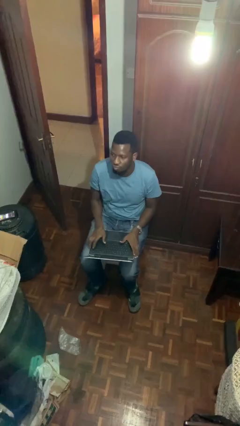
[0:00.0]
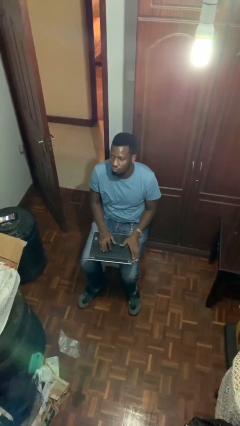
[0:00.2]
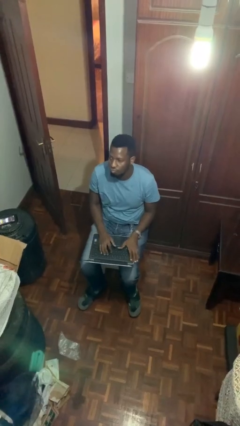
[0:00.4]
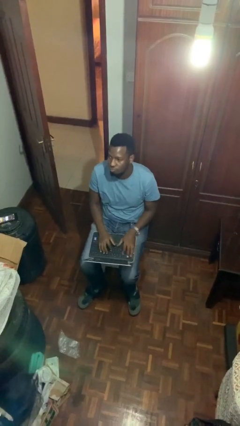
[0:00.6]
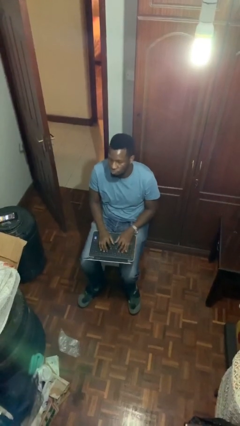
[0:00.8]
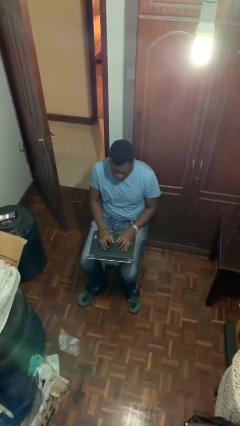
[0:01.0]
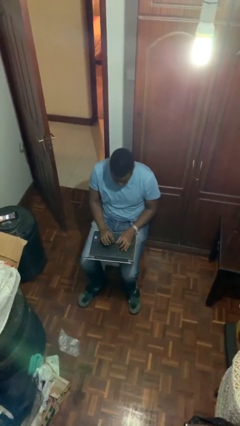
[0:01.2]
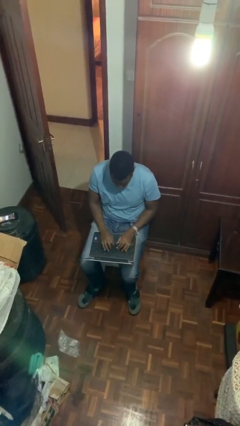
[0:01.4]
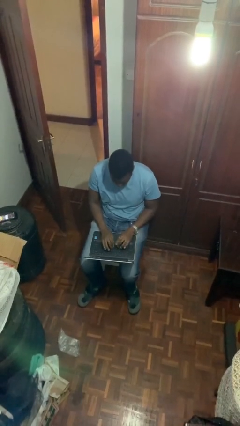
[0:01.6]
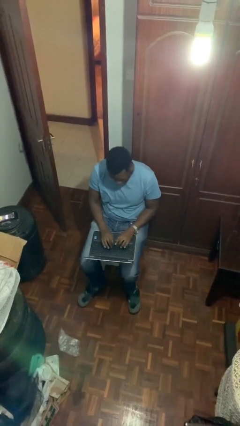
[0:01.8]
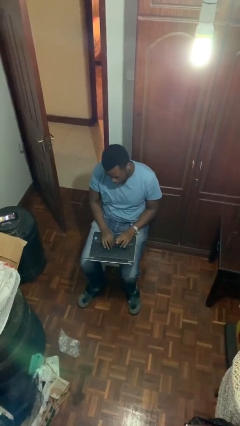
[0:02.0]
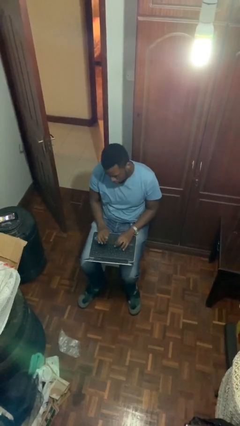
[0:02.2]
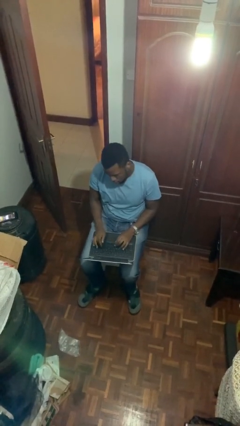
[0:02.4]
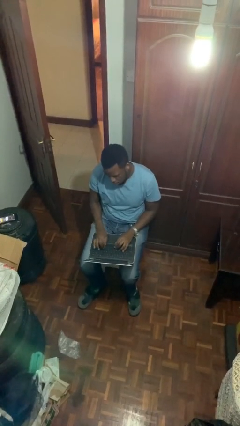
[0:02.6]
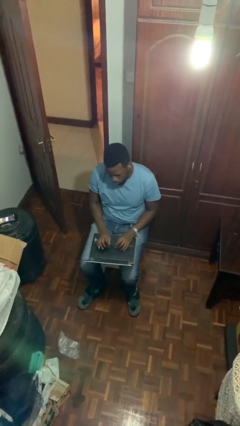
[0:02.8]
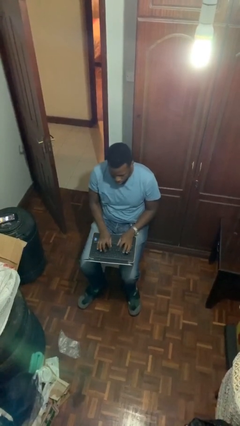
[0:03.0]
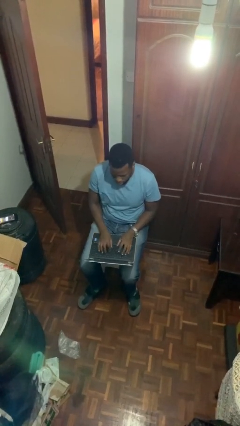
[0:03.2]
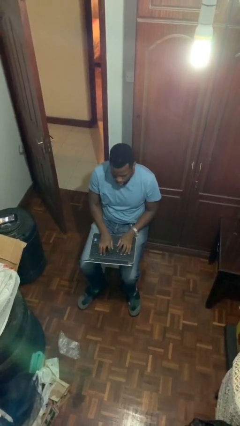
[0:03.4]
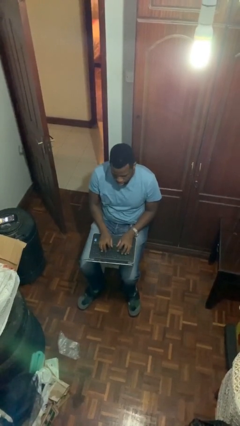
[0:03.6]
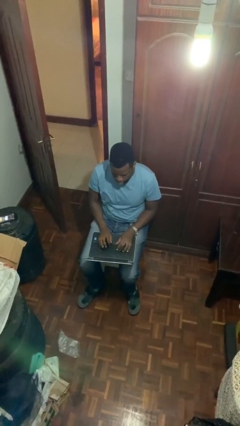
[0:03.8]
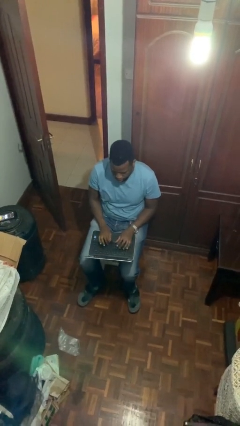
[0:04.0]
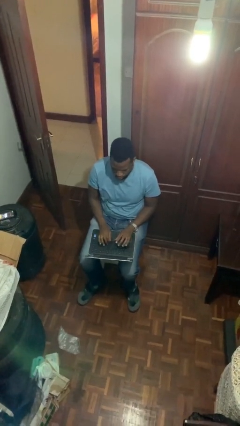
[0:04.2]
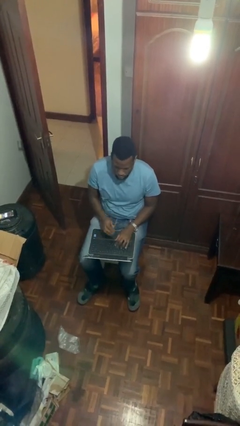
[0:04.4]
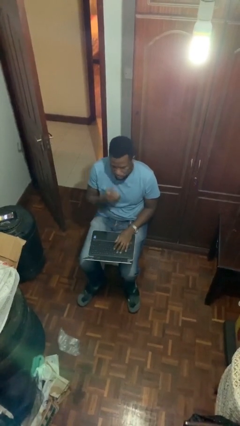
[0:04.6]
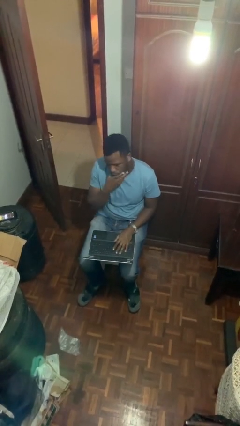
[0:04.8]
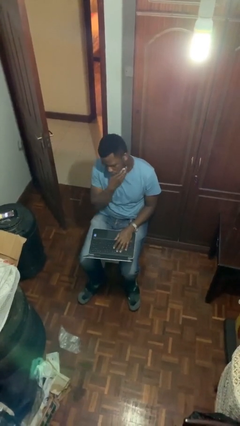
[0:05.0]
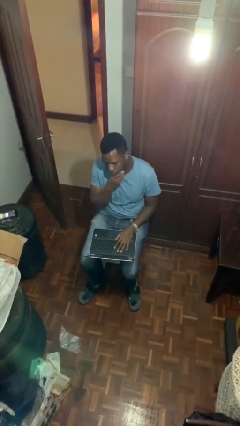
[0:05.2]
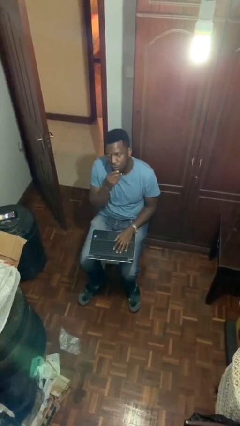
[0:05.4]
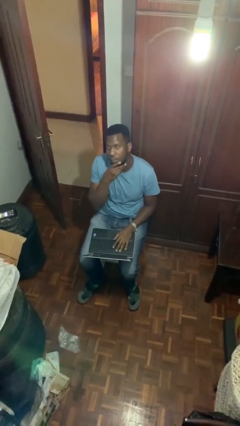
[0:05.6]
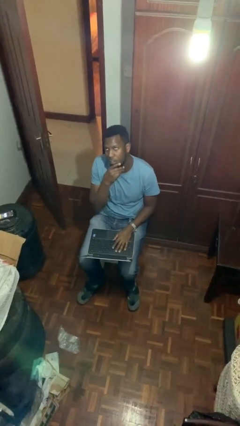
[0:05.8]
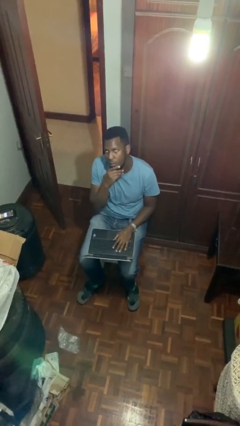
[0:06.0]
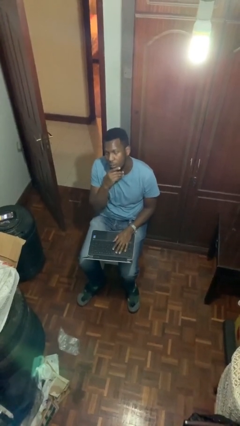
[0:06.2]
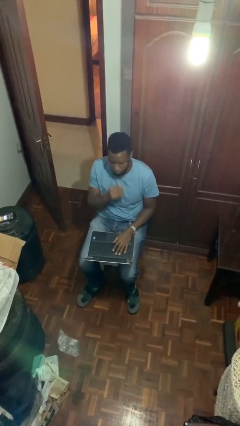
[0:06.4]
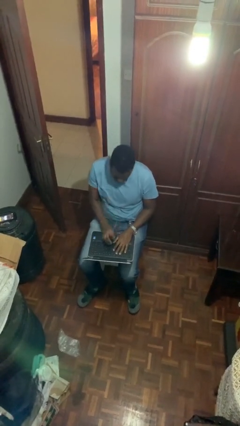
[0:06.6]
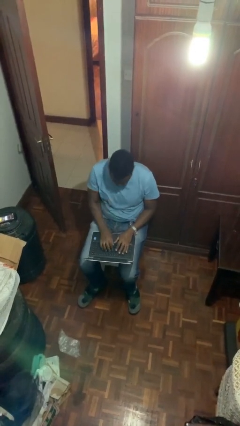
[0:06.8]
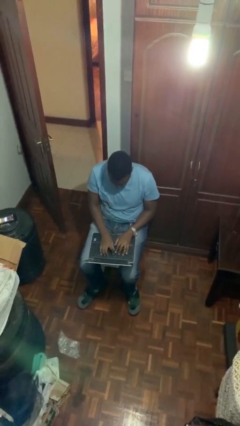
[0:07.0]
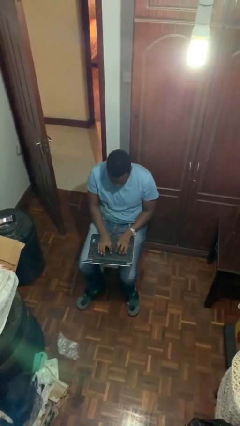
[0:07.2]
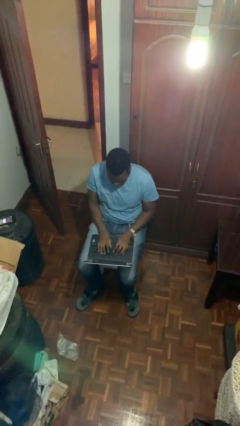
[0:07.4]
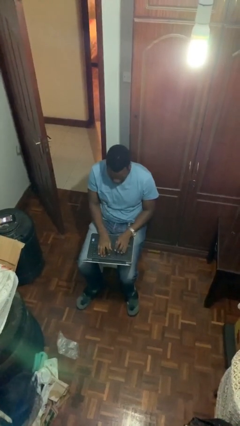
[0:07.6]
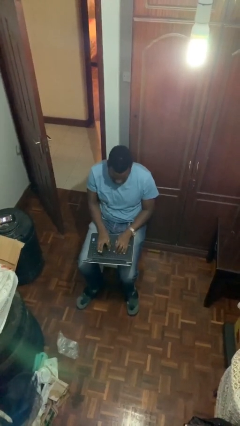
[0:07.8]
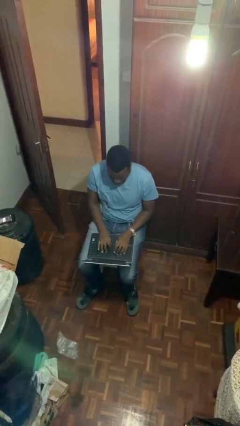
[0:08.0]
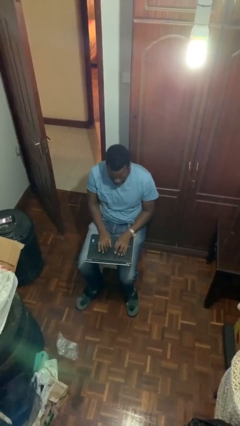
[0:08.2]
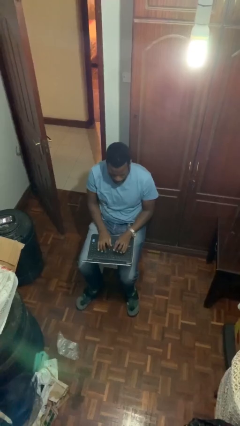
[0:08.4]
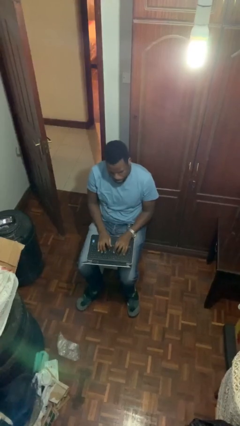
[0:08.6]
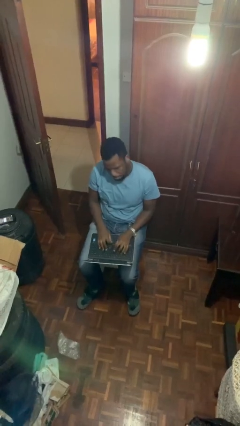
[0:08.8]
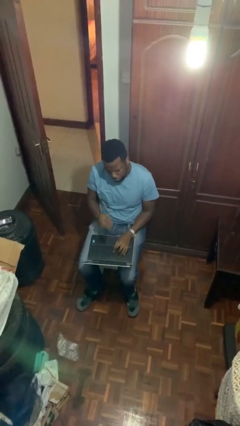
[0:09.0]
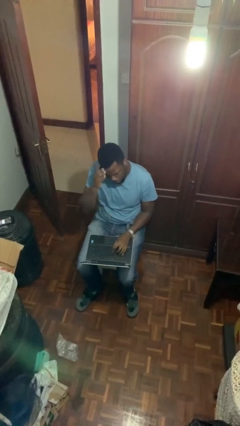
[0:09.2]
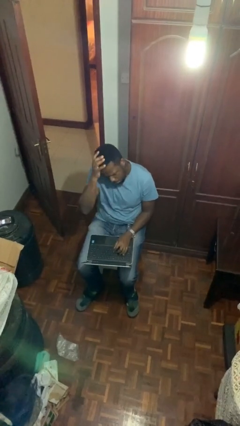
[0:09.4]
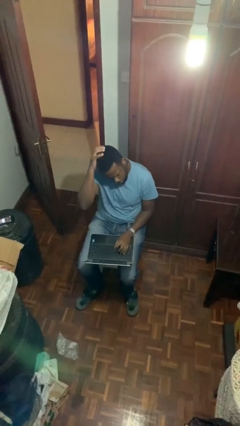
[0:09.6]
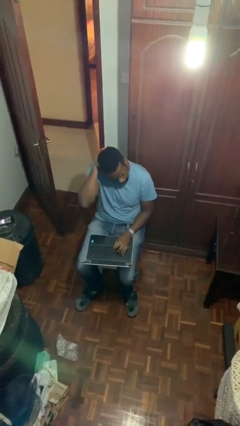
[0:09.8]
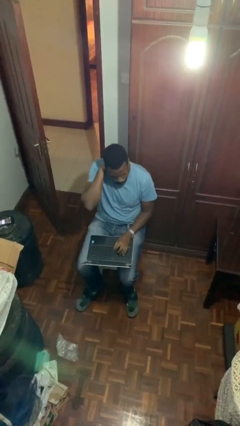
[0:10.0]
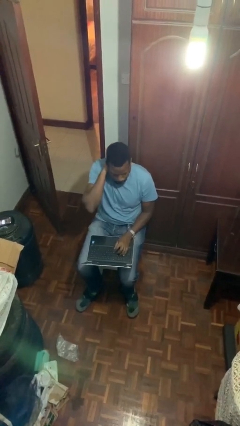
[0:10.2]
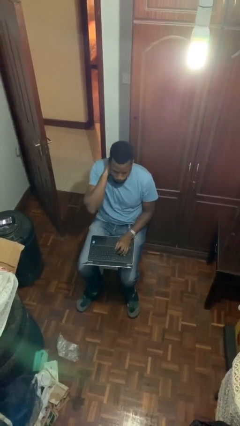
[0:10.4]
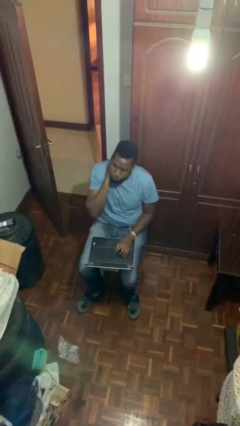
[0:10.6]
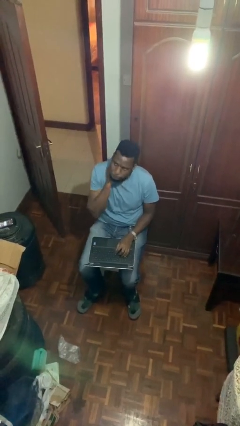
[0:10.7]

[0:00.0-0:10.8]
person interacts with laptop

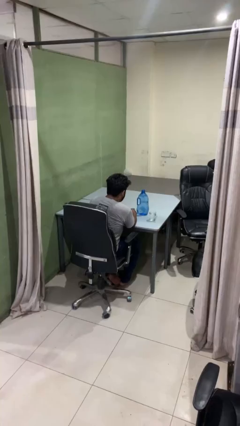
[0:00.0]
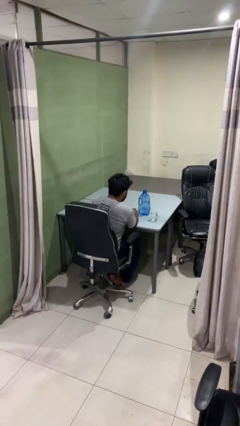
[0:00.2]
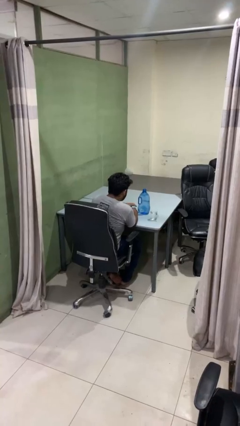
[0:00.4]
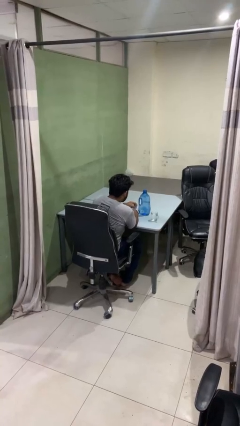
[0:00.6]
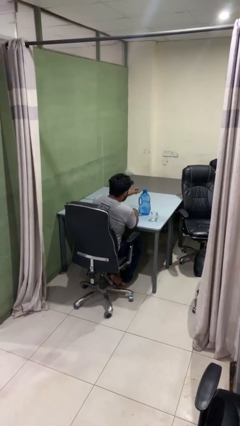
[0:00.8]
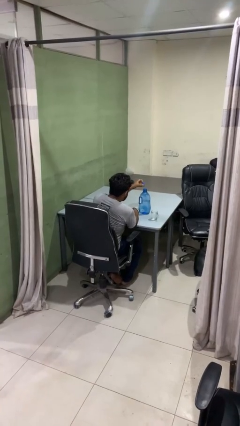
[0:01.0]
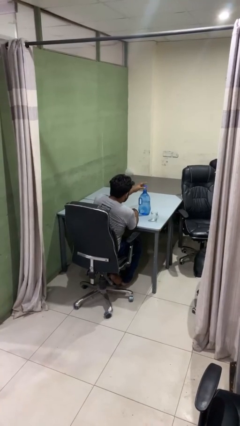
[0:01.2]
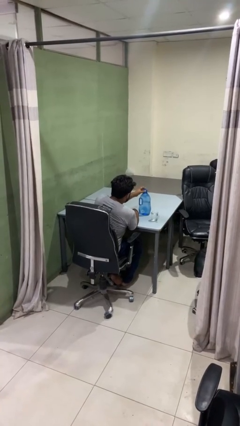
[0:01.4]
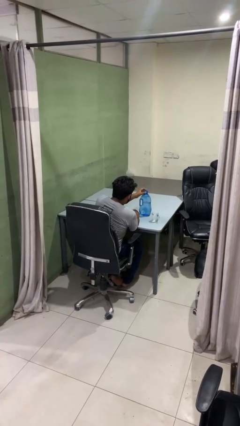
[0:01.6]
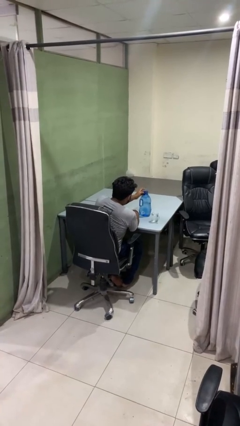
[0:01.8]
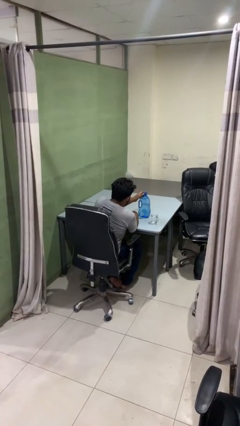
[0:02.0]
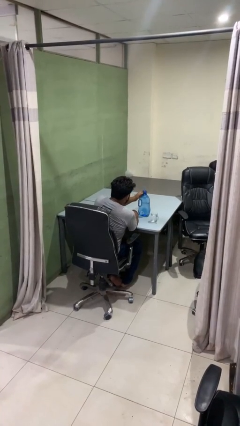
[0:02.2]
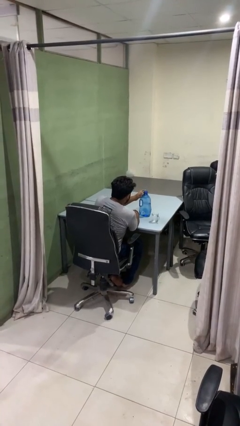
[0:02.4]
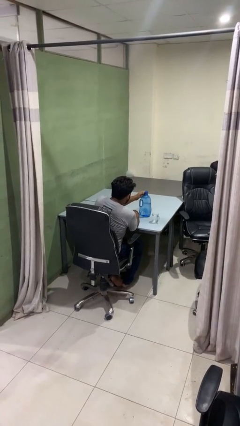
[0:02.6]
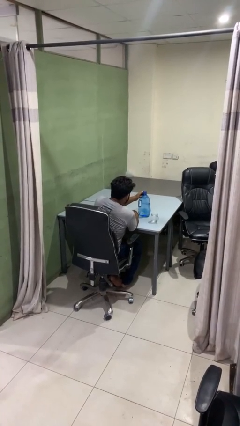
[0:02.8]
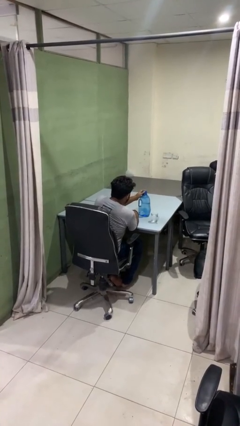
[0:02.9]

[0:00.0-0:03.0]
person screws lid to bottle

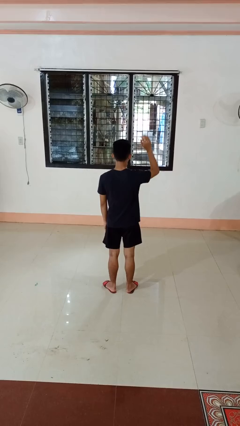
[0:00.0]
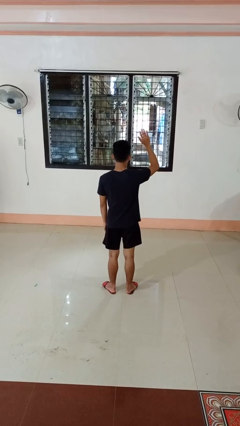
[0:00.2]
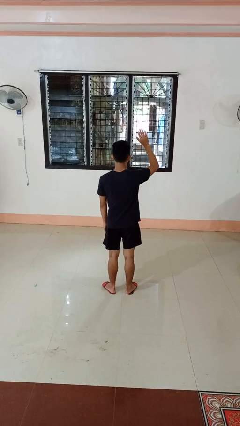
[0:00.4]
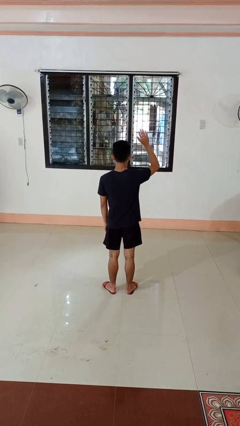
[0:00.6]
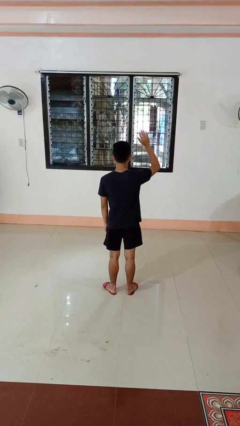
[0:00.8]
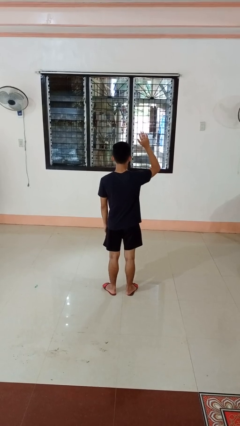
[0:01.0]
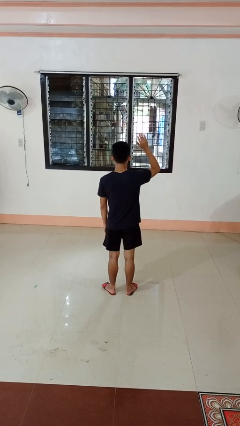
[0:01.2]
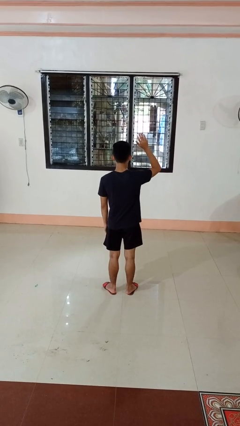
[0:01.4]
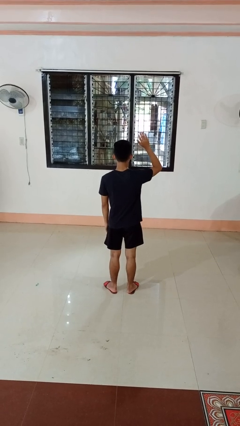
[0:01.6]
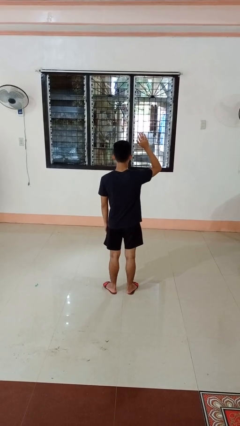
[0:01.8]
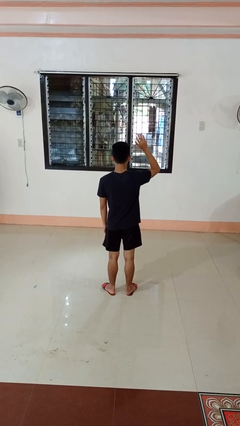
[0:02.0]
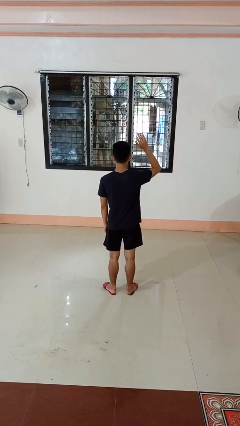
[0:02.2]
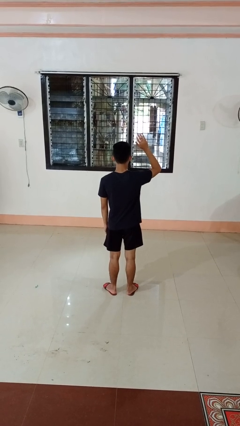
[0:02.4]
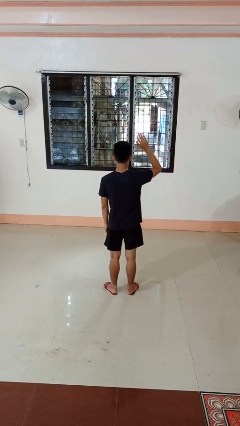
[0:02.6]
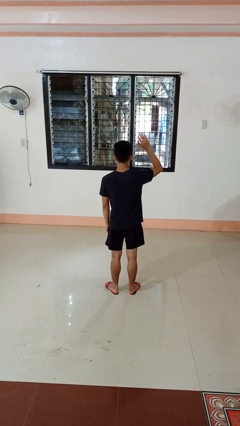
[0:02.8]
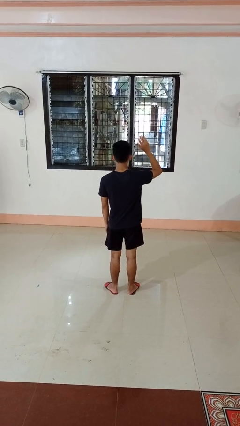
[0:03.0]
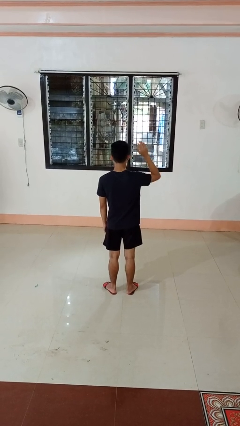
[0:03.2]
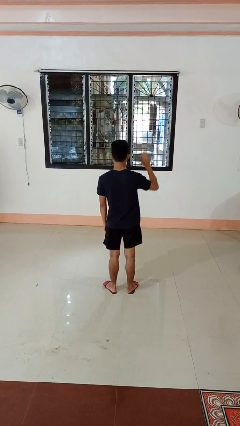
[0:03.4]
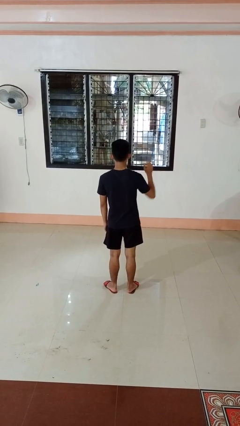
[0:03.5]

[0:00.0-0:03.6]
person gestures raise hand

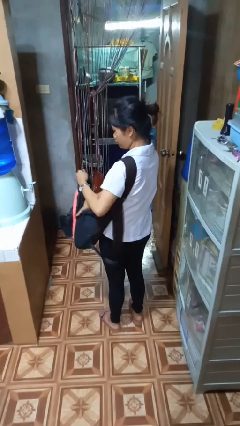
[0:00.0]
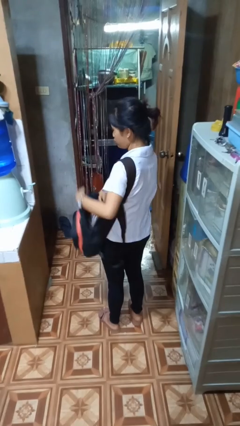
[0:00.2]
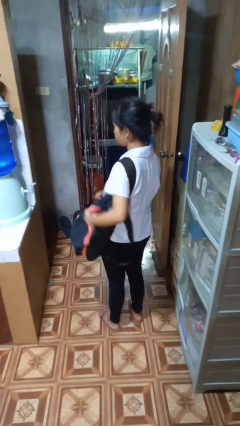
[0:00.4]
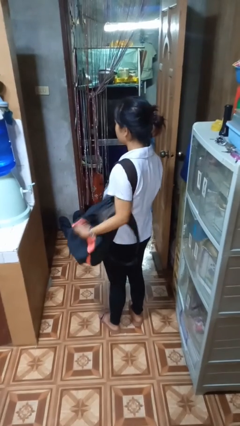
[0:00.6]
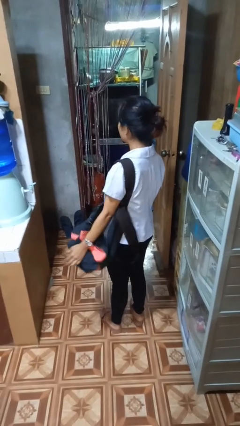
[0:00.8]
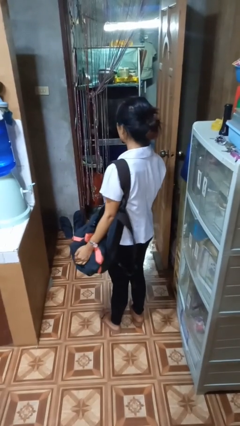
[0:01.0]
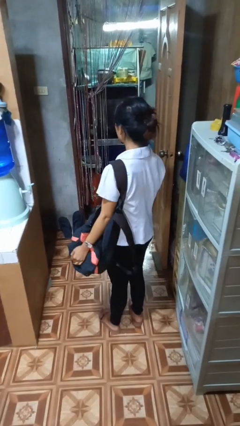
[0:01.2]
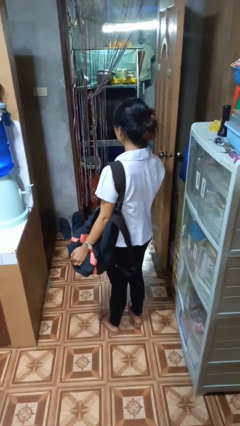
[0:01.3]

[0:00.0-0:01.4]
person puts object into backpack
